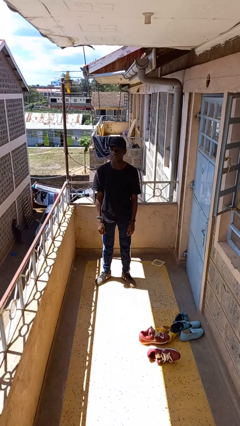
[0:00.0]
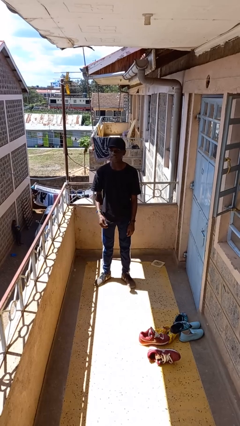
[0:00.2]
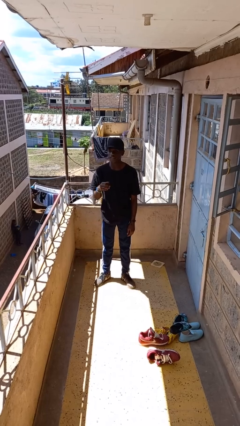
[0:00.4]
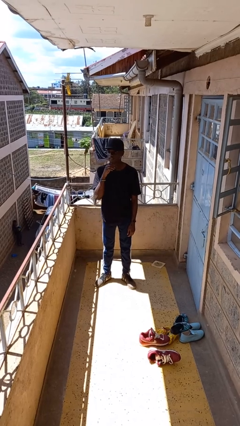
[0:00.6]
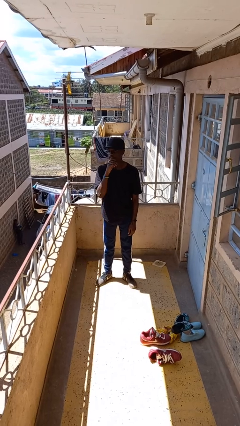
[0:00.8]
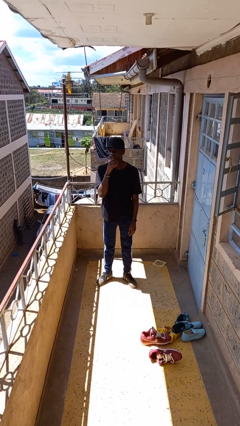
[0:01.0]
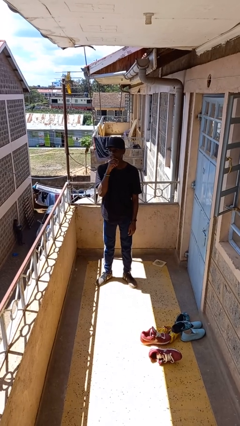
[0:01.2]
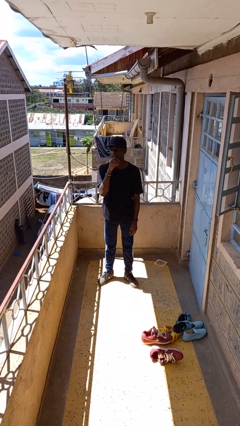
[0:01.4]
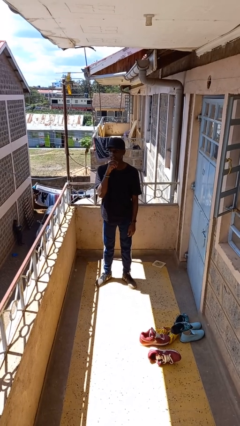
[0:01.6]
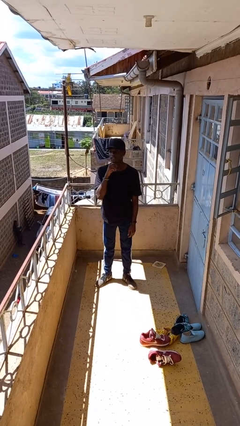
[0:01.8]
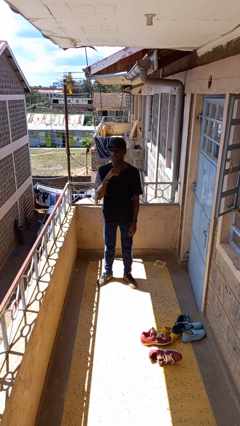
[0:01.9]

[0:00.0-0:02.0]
person strokes chin

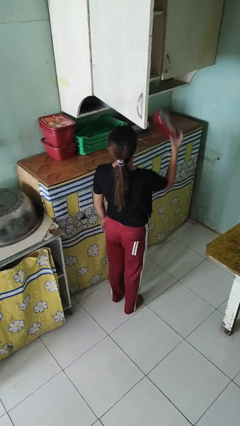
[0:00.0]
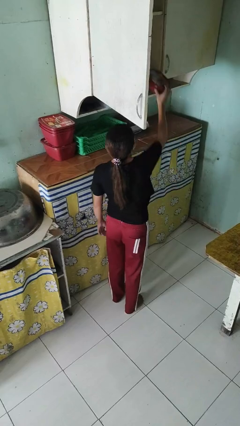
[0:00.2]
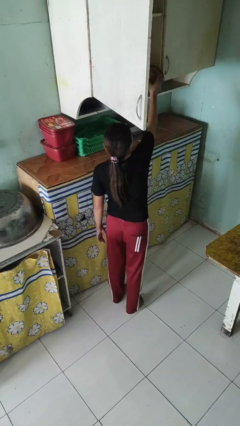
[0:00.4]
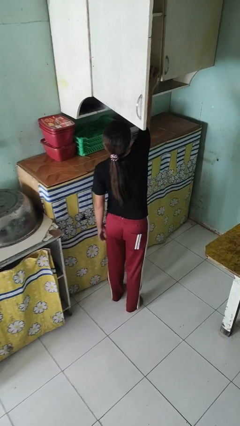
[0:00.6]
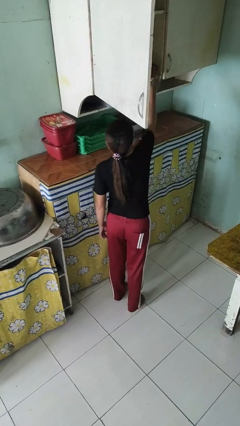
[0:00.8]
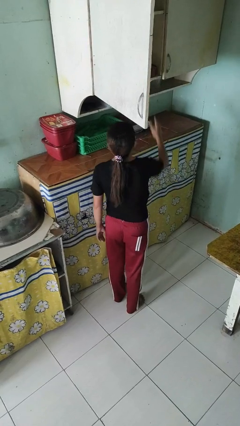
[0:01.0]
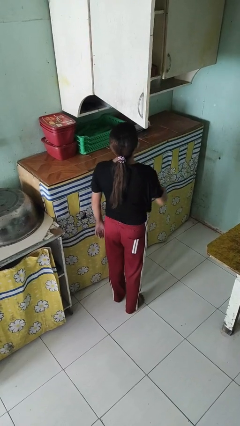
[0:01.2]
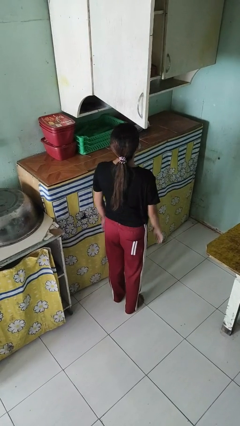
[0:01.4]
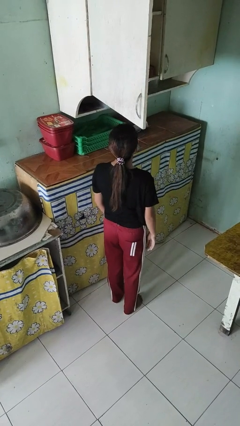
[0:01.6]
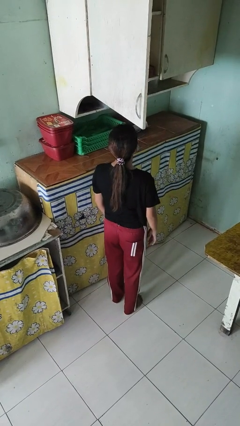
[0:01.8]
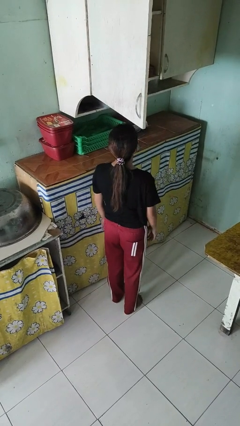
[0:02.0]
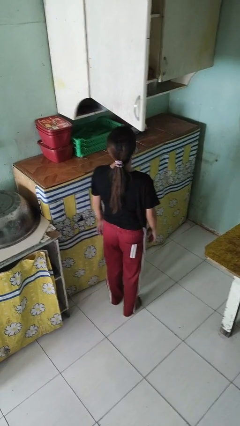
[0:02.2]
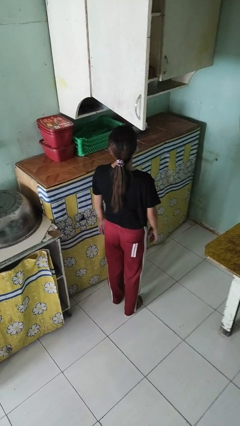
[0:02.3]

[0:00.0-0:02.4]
person puts object in cabinet

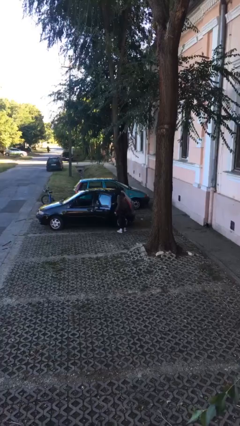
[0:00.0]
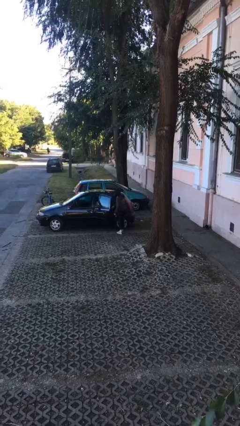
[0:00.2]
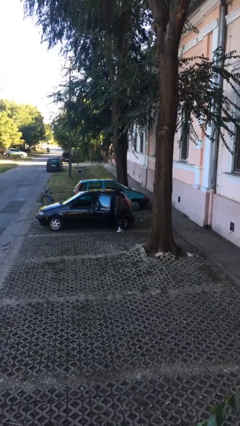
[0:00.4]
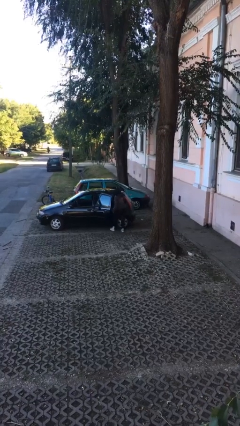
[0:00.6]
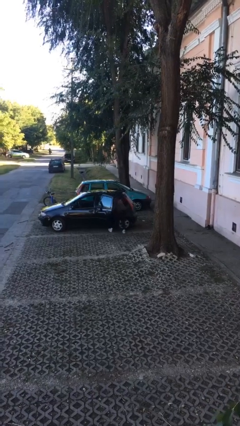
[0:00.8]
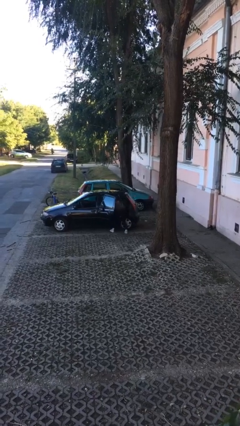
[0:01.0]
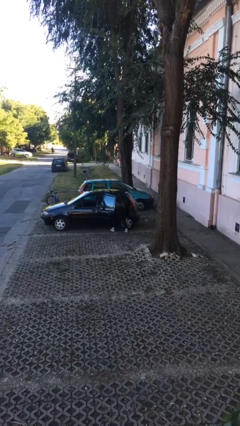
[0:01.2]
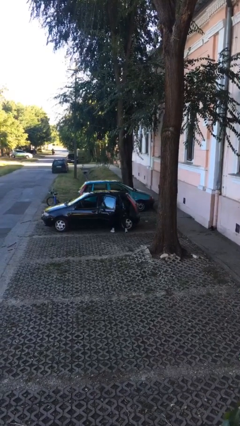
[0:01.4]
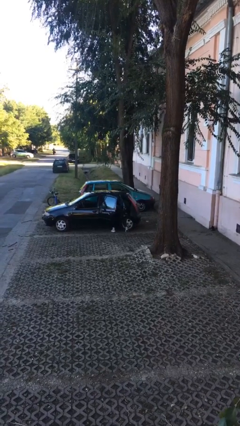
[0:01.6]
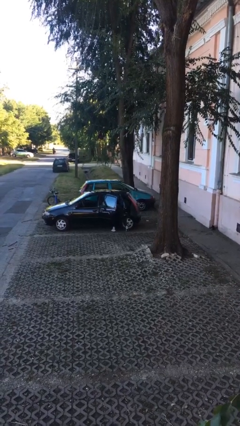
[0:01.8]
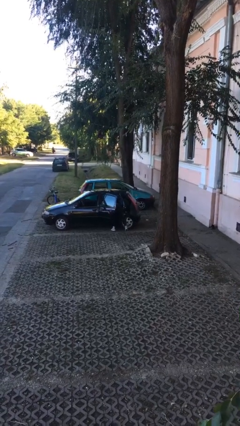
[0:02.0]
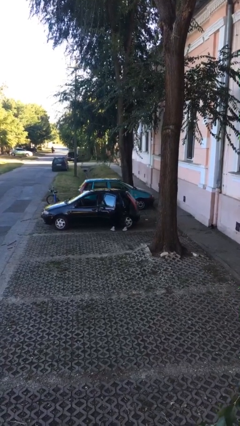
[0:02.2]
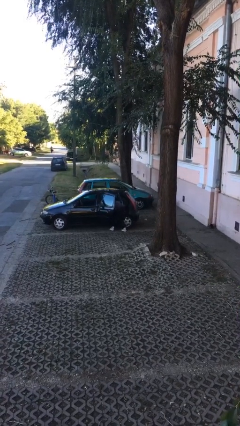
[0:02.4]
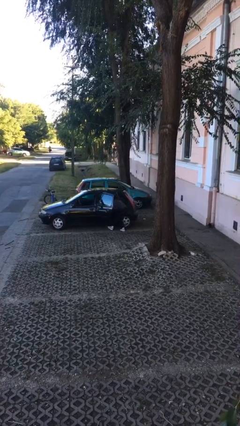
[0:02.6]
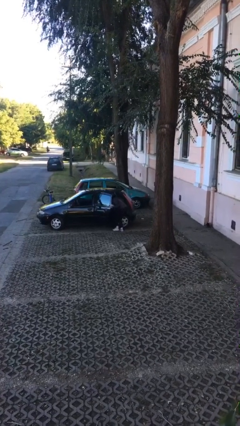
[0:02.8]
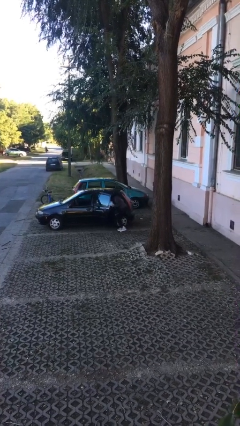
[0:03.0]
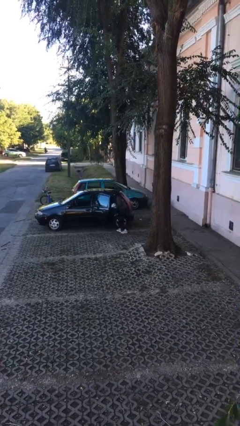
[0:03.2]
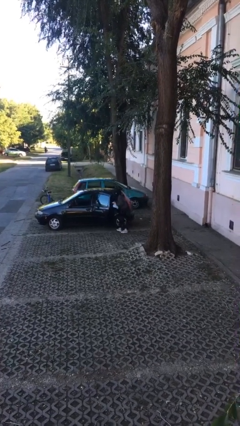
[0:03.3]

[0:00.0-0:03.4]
person unloads car

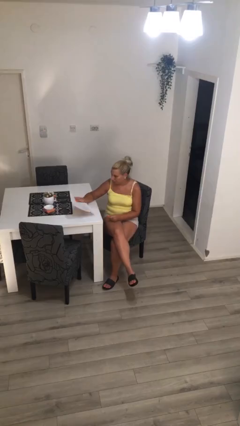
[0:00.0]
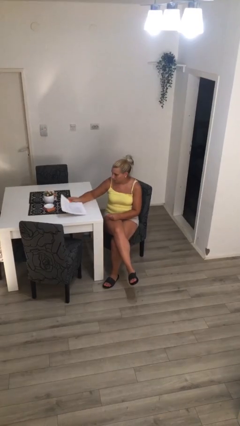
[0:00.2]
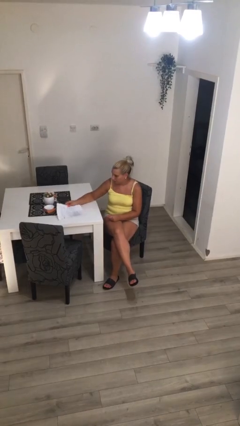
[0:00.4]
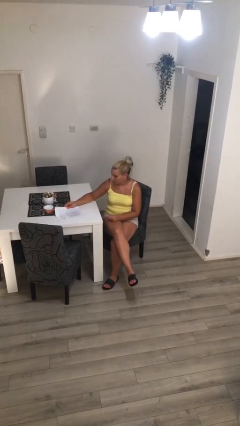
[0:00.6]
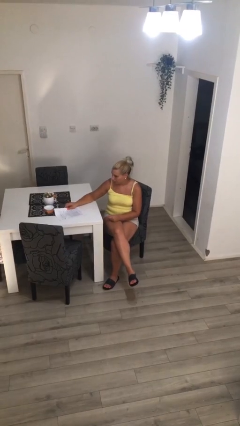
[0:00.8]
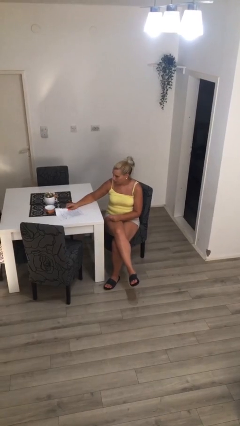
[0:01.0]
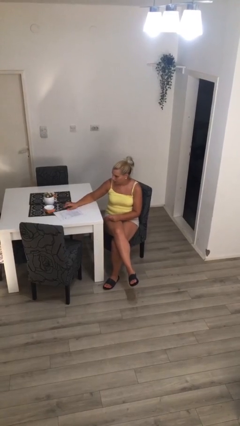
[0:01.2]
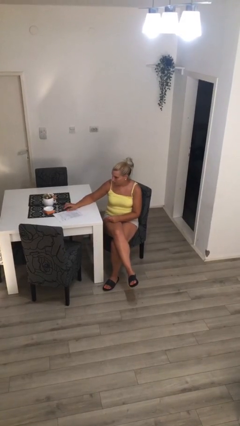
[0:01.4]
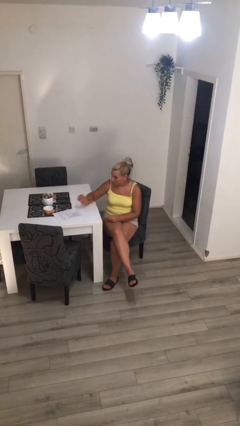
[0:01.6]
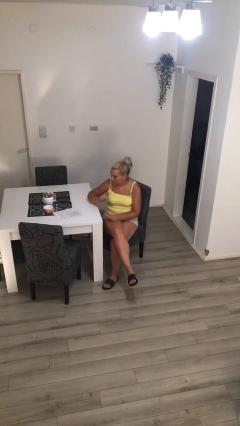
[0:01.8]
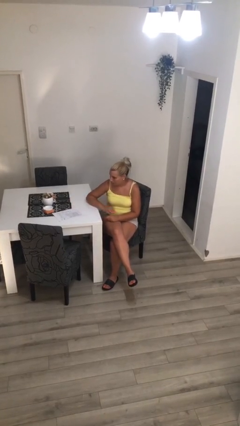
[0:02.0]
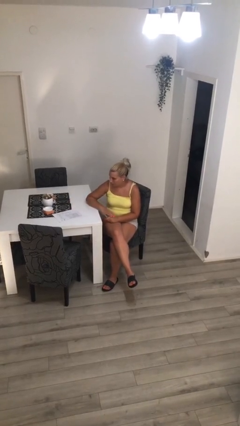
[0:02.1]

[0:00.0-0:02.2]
person puts down object on table

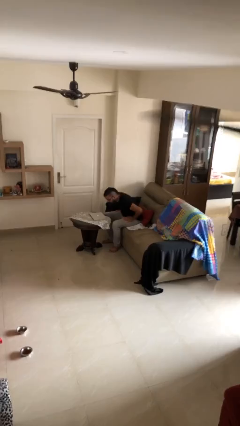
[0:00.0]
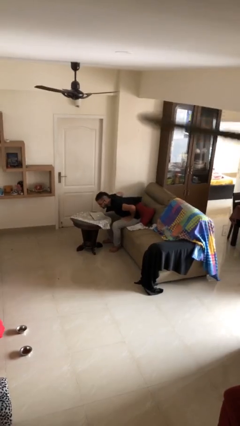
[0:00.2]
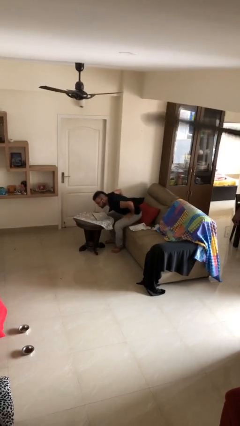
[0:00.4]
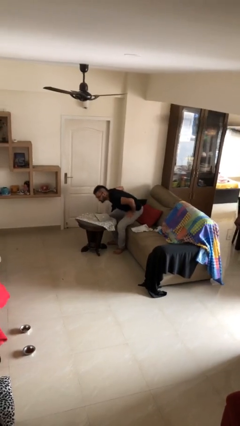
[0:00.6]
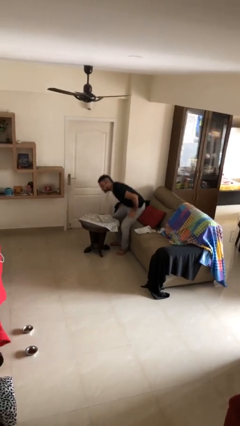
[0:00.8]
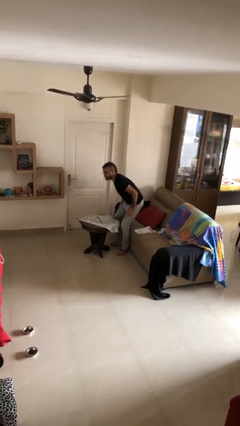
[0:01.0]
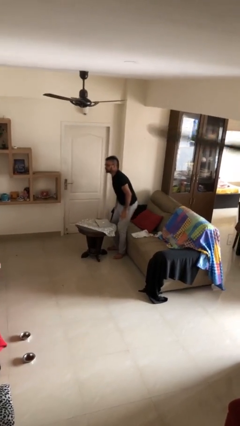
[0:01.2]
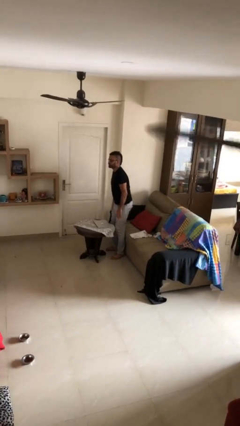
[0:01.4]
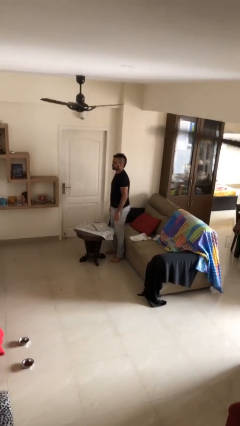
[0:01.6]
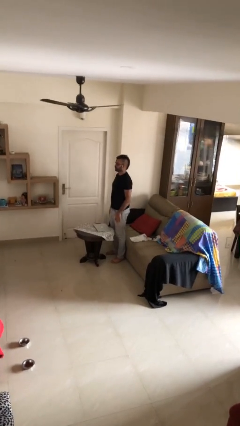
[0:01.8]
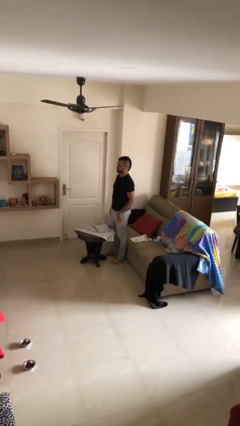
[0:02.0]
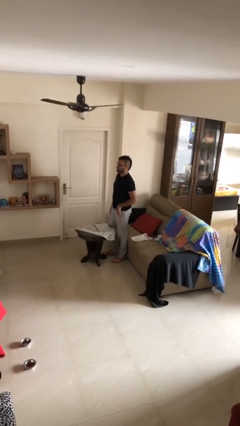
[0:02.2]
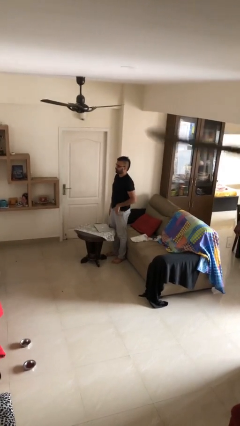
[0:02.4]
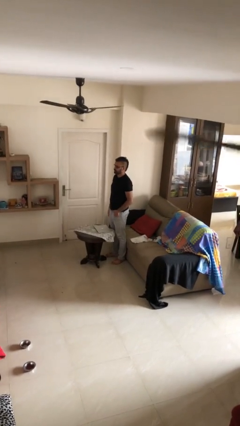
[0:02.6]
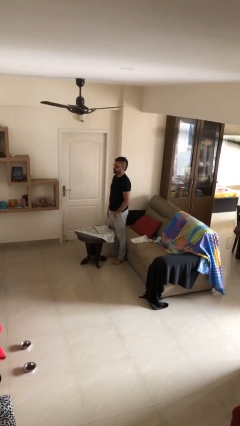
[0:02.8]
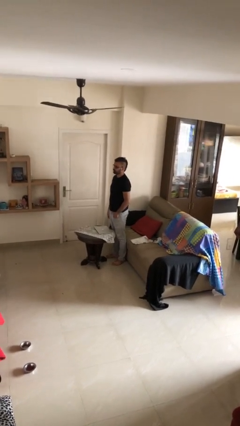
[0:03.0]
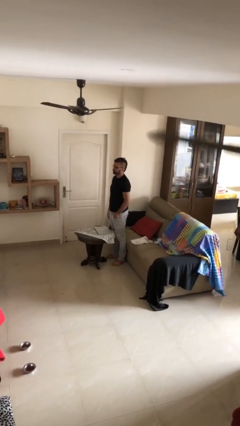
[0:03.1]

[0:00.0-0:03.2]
person stands up

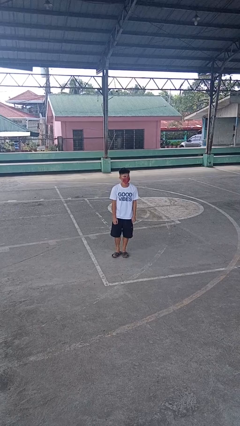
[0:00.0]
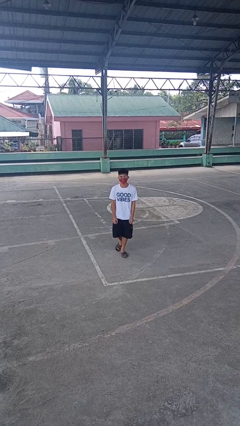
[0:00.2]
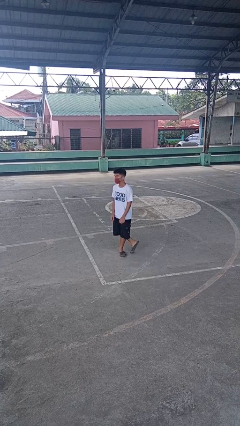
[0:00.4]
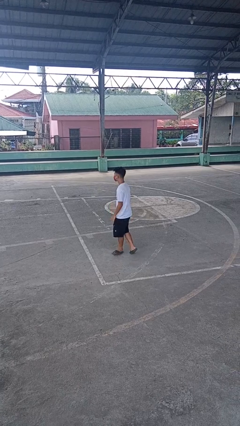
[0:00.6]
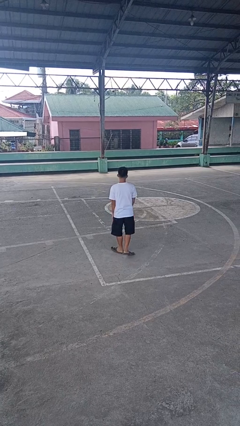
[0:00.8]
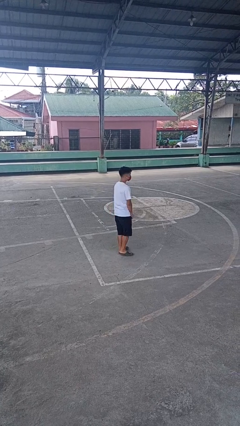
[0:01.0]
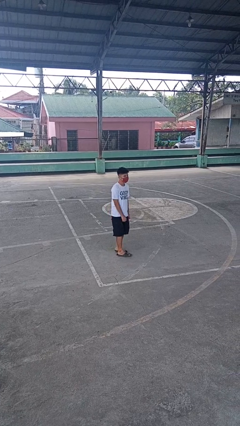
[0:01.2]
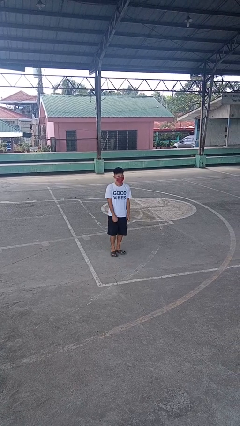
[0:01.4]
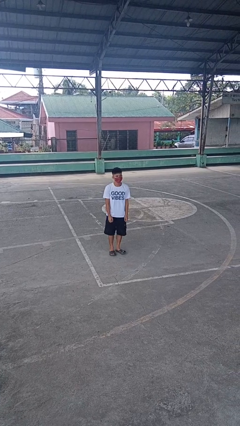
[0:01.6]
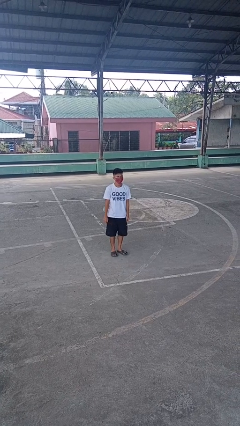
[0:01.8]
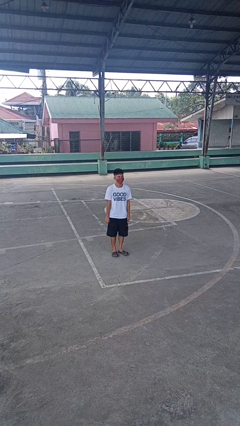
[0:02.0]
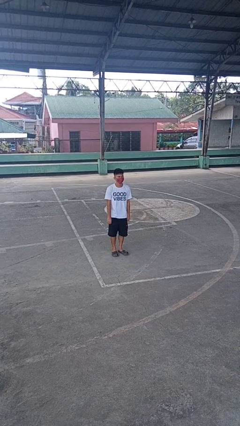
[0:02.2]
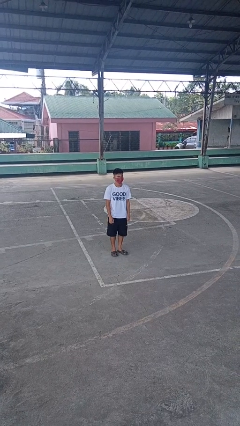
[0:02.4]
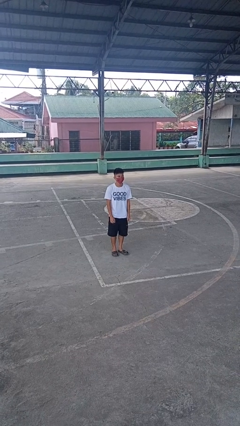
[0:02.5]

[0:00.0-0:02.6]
person twirls

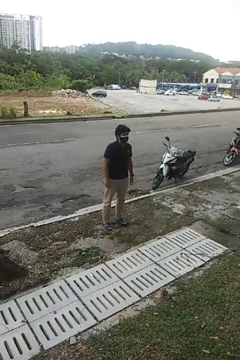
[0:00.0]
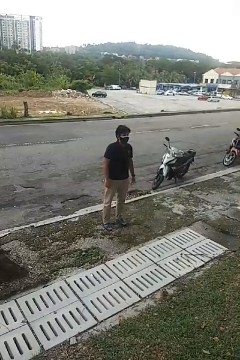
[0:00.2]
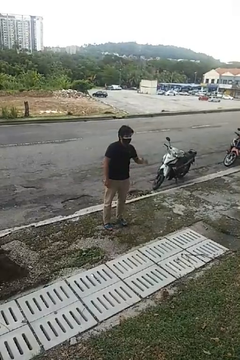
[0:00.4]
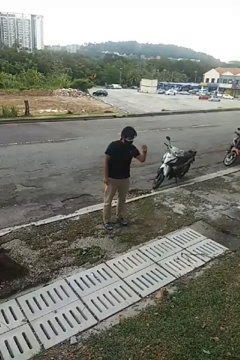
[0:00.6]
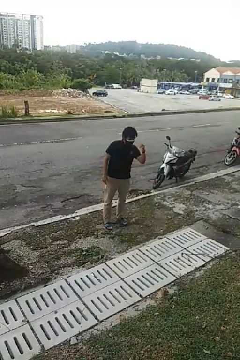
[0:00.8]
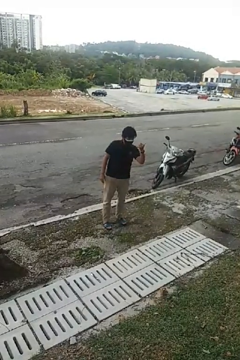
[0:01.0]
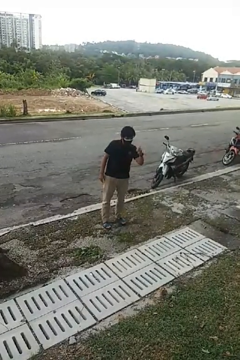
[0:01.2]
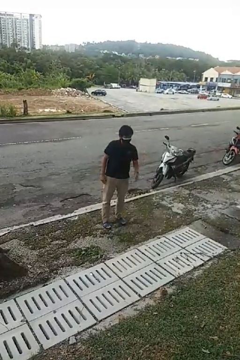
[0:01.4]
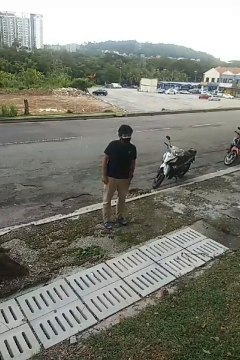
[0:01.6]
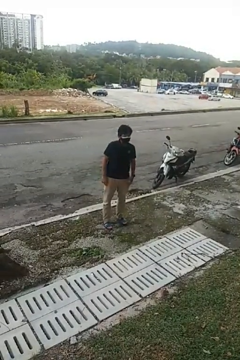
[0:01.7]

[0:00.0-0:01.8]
person gestures hang loose
